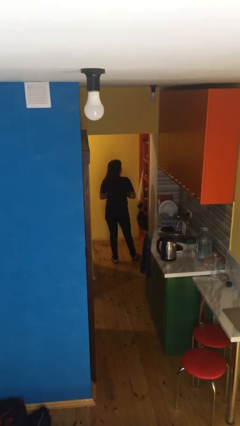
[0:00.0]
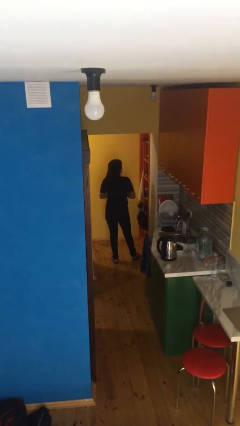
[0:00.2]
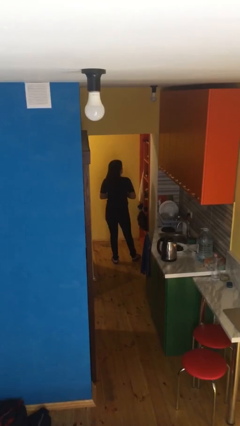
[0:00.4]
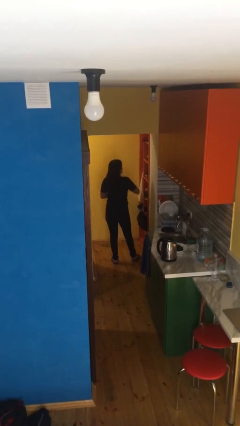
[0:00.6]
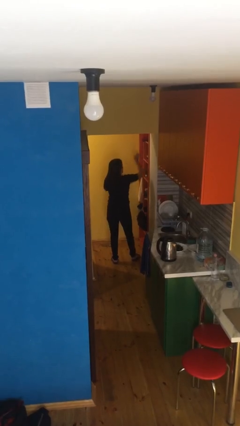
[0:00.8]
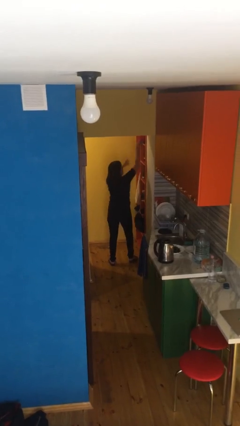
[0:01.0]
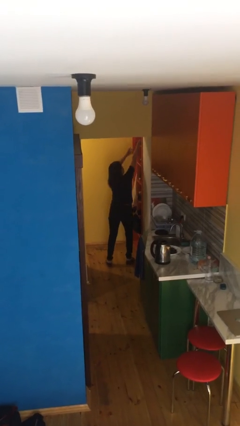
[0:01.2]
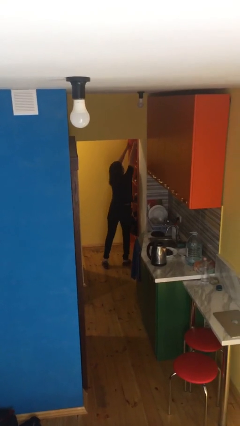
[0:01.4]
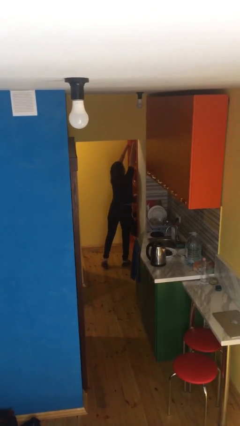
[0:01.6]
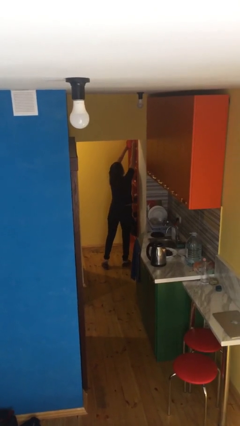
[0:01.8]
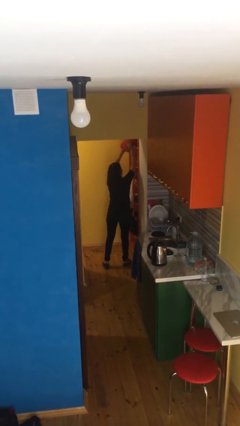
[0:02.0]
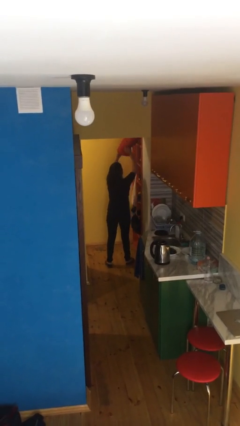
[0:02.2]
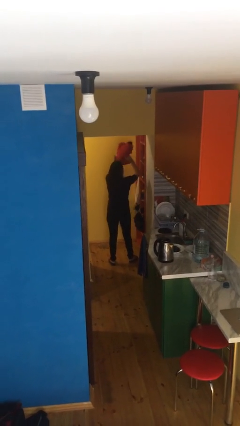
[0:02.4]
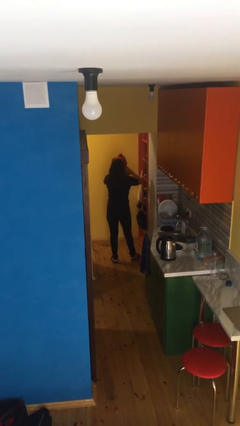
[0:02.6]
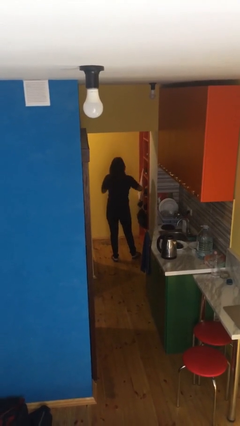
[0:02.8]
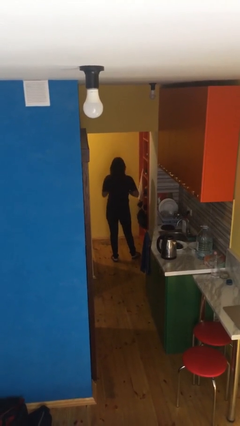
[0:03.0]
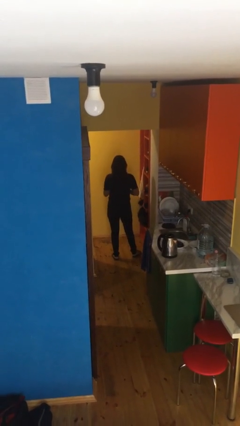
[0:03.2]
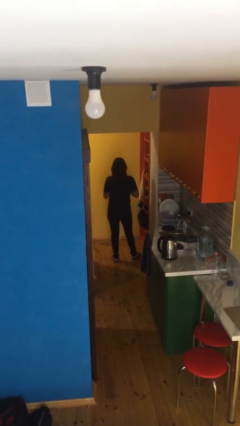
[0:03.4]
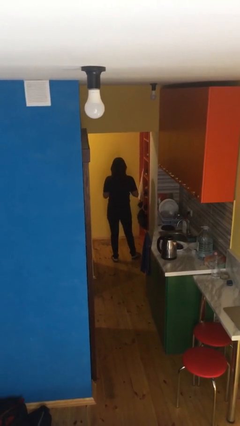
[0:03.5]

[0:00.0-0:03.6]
person picks up object from shelf

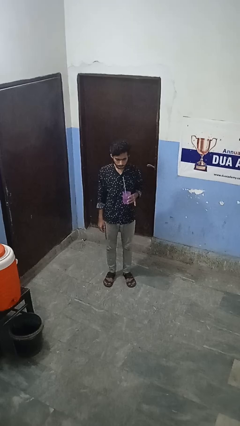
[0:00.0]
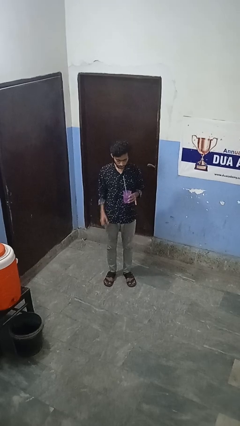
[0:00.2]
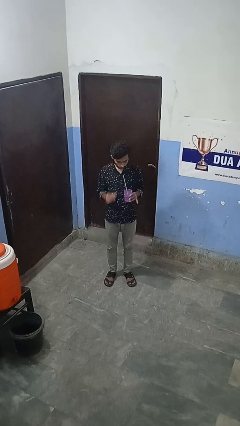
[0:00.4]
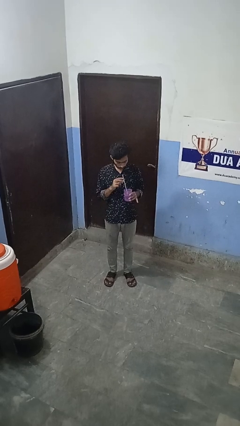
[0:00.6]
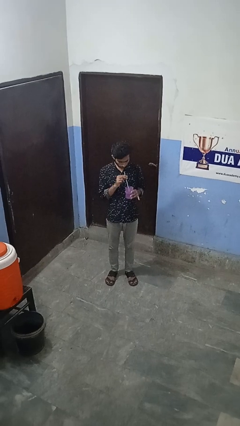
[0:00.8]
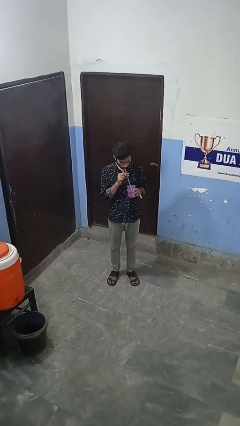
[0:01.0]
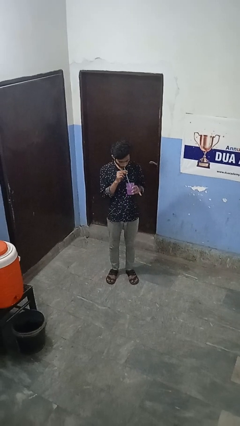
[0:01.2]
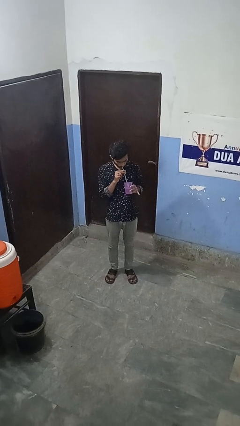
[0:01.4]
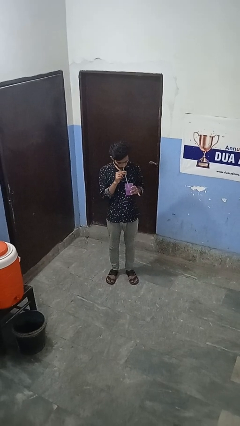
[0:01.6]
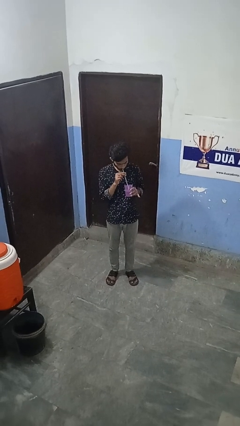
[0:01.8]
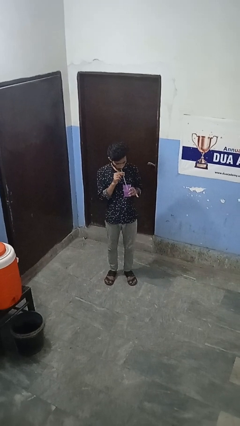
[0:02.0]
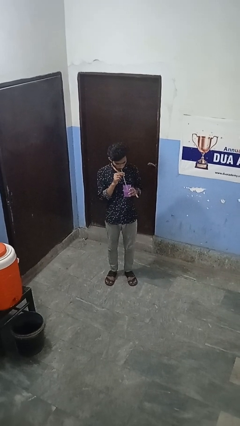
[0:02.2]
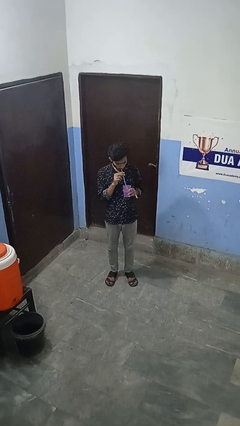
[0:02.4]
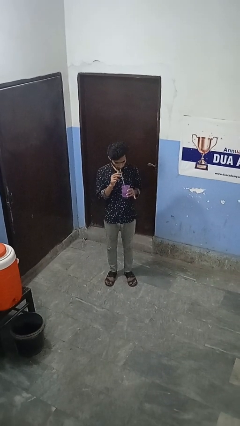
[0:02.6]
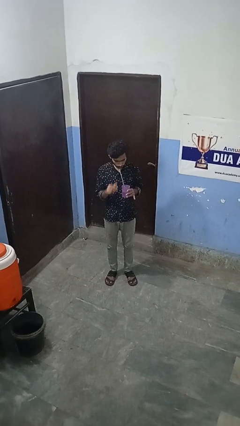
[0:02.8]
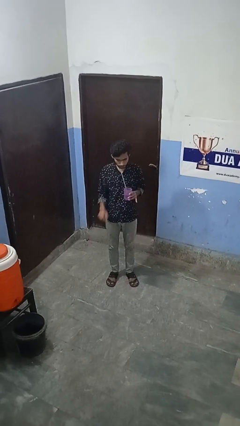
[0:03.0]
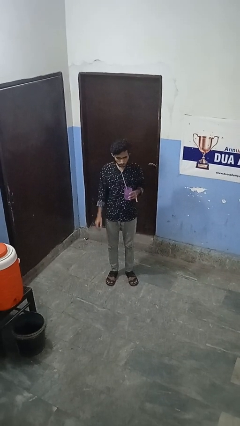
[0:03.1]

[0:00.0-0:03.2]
person drinks from straw

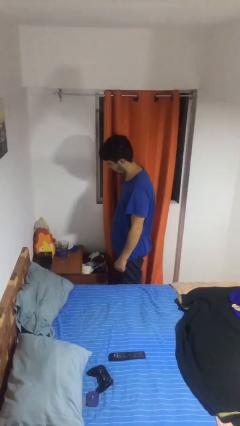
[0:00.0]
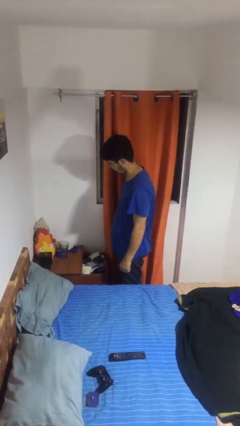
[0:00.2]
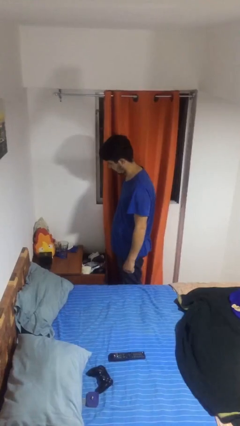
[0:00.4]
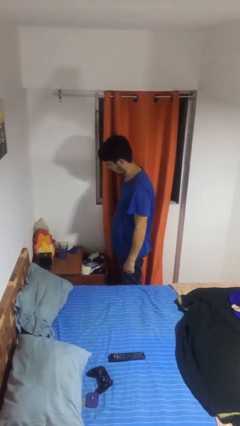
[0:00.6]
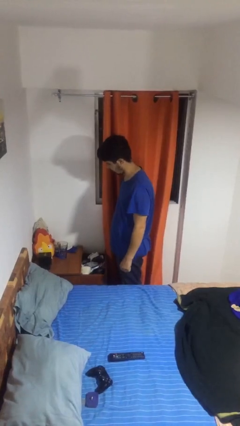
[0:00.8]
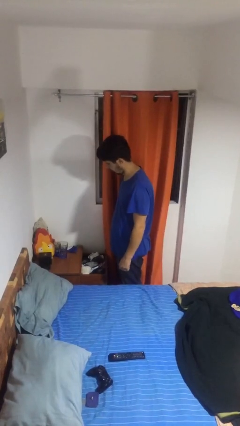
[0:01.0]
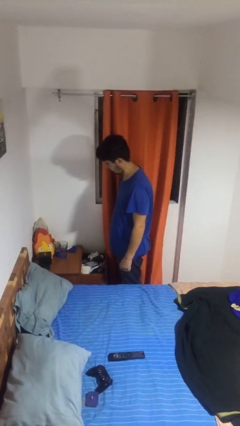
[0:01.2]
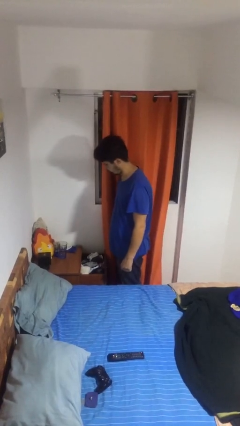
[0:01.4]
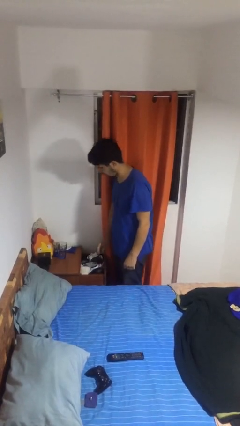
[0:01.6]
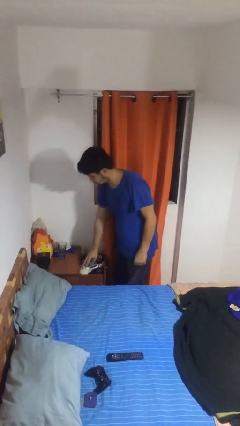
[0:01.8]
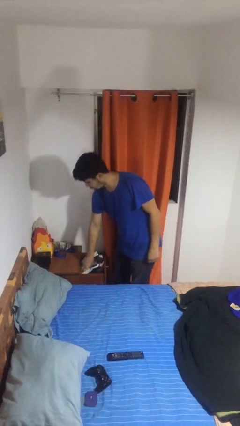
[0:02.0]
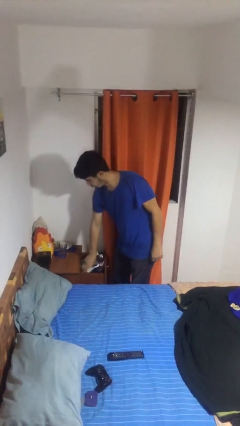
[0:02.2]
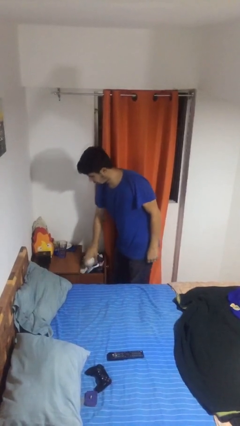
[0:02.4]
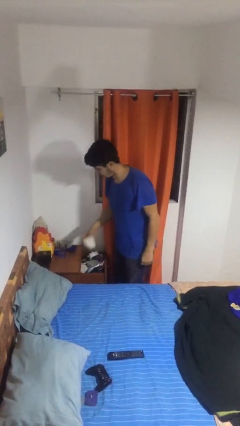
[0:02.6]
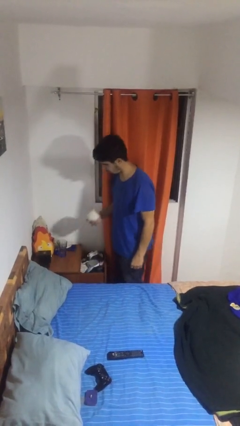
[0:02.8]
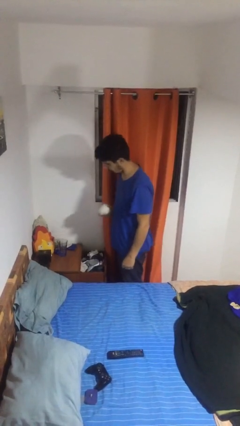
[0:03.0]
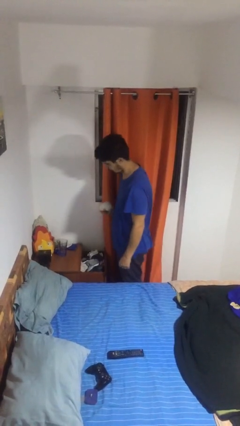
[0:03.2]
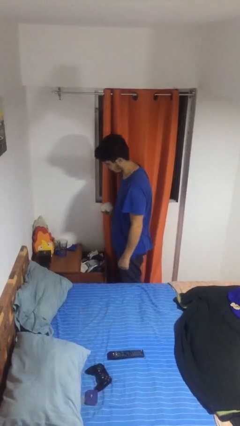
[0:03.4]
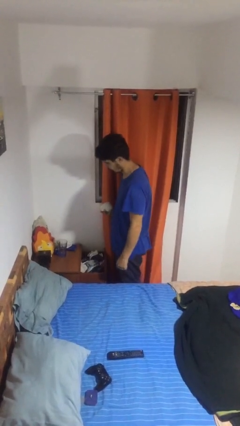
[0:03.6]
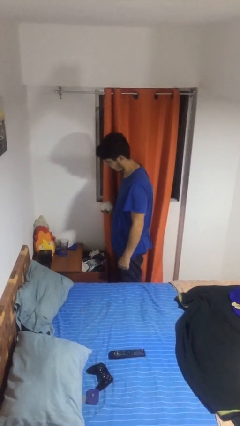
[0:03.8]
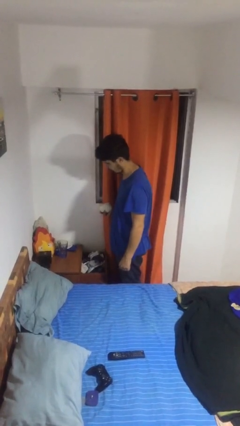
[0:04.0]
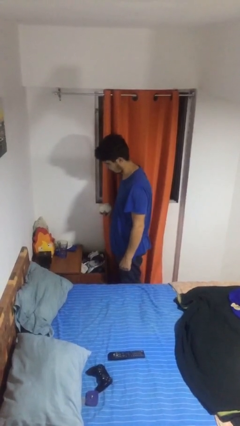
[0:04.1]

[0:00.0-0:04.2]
person takes clothes from dresser

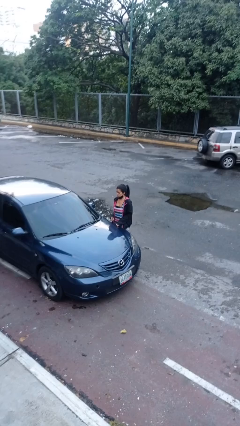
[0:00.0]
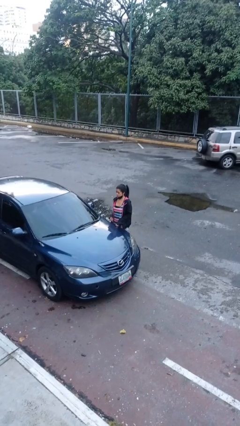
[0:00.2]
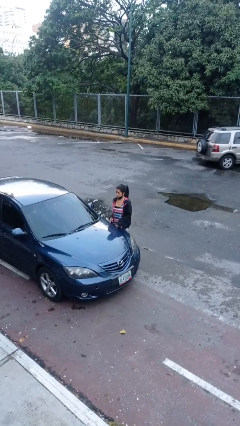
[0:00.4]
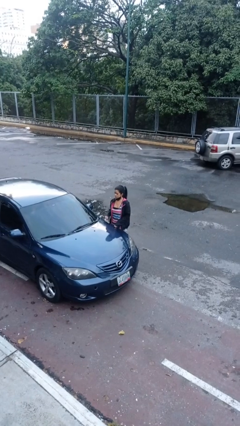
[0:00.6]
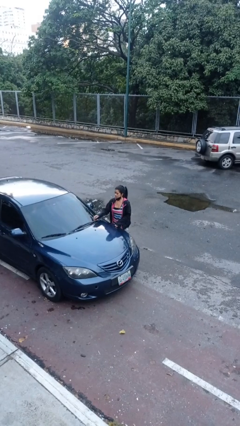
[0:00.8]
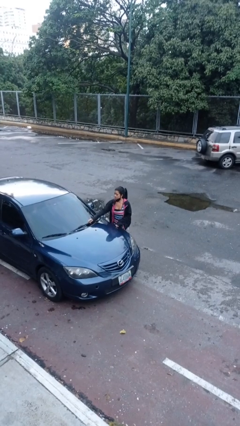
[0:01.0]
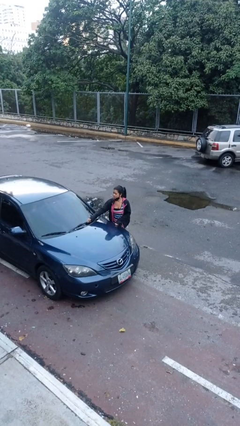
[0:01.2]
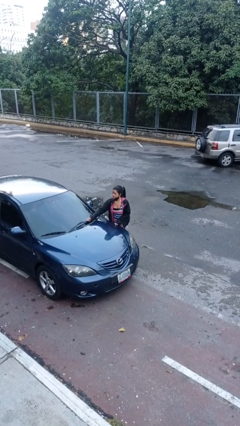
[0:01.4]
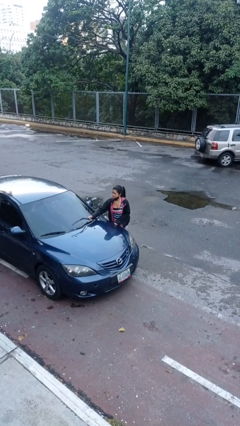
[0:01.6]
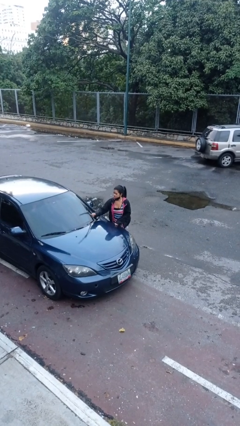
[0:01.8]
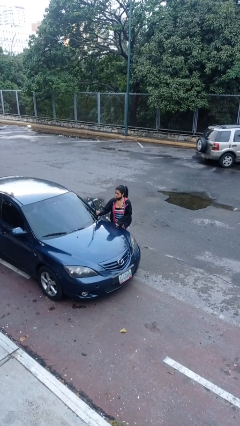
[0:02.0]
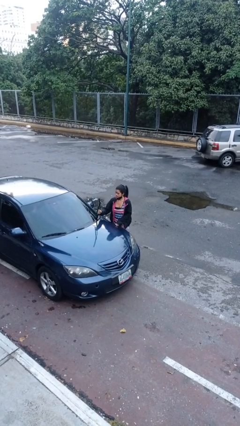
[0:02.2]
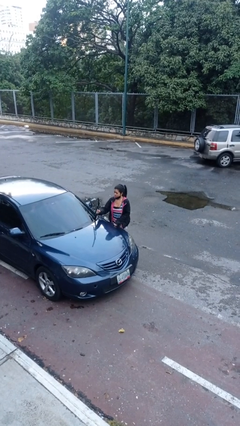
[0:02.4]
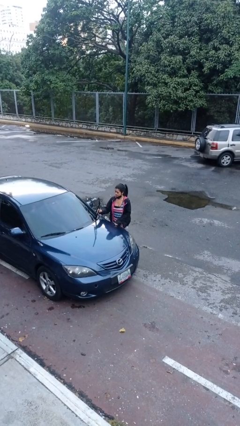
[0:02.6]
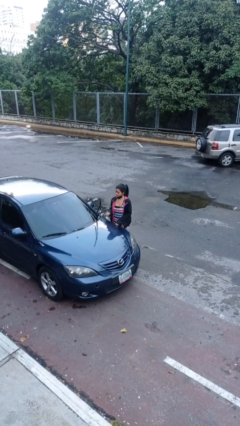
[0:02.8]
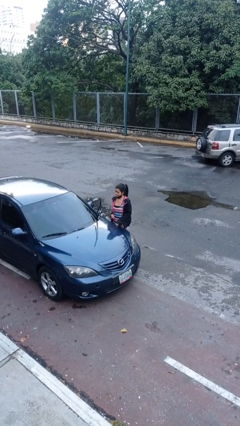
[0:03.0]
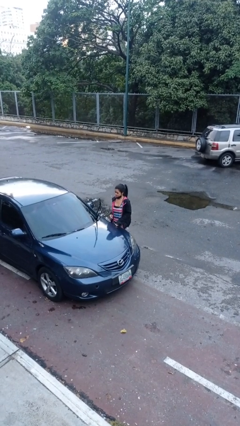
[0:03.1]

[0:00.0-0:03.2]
person flips up car wipers

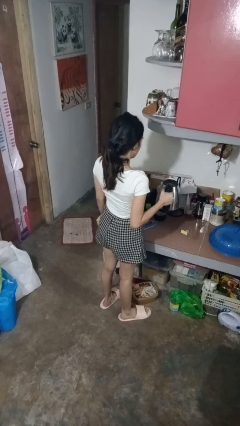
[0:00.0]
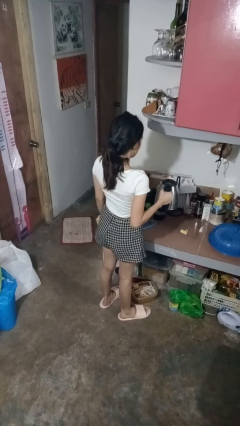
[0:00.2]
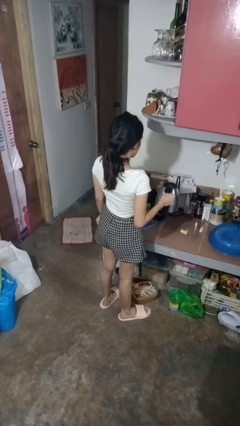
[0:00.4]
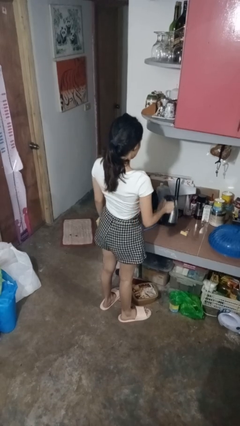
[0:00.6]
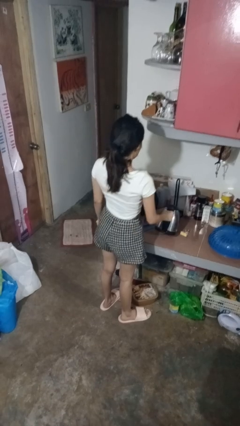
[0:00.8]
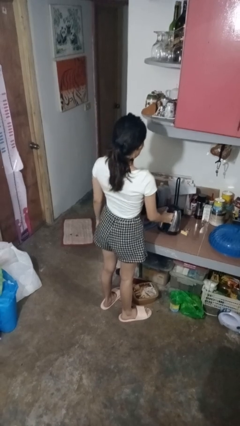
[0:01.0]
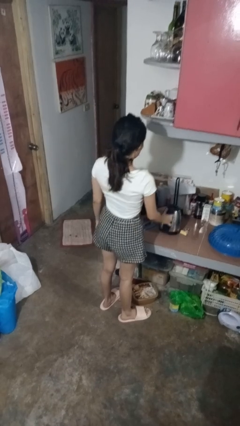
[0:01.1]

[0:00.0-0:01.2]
person puts down object on countertop

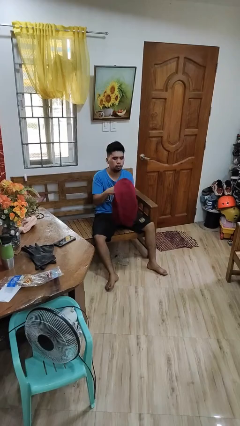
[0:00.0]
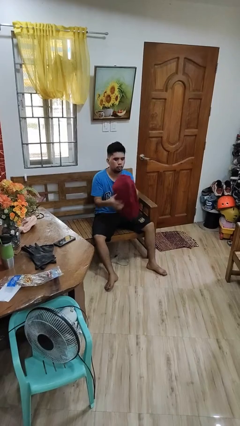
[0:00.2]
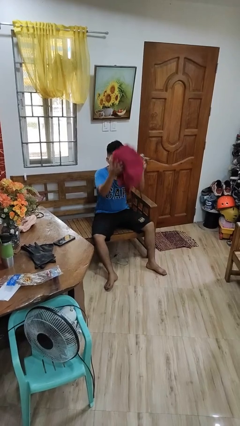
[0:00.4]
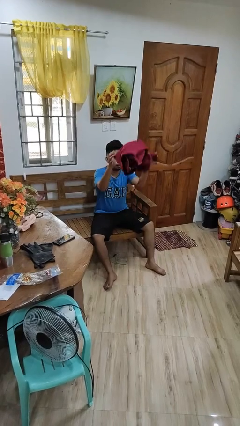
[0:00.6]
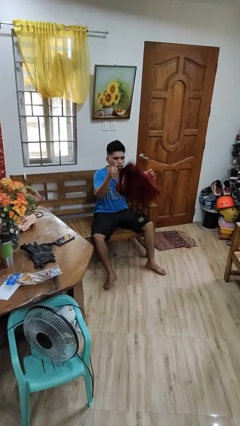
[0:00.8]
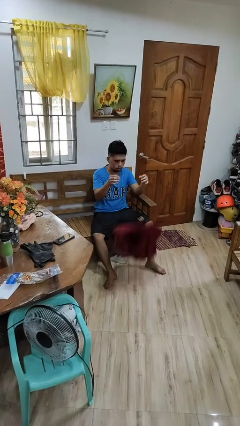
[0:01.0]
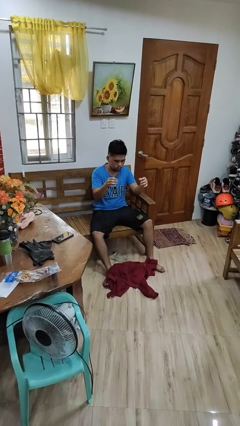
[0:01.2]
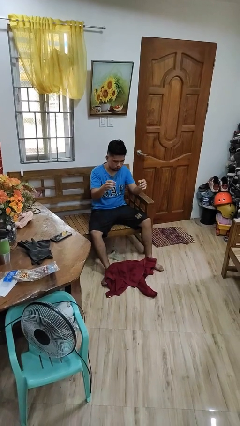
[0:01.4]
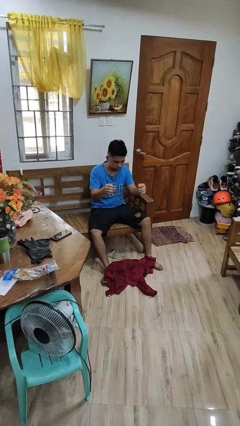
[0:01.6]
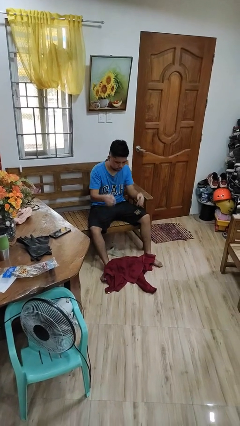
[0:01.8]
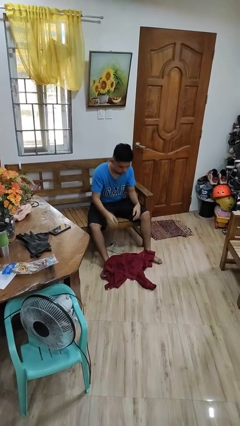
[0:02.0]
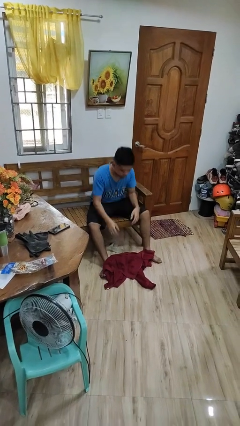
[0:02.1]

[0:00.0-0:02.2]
person drops object

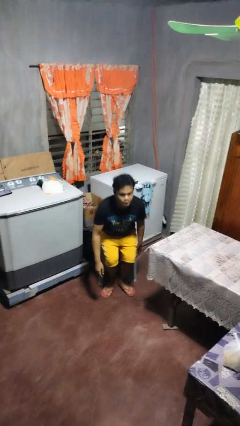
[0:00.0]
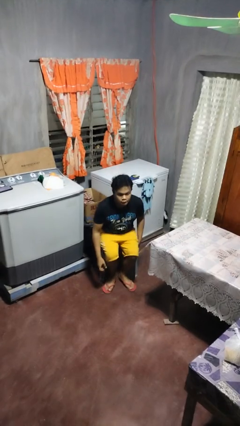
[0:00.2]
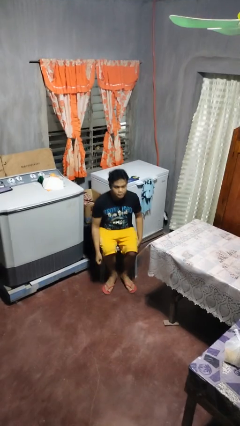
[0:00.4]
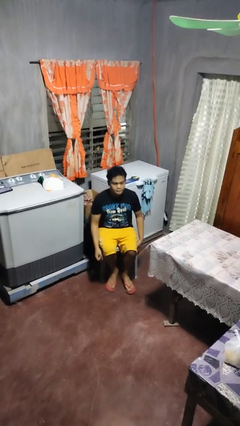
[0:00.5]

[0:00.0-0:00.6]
person sits down
